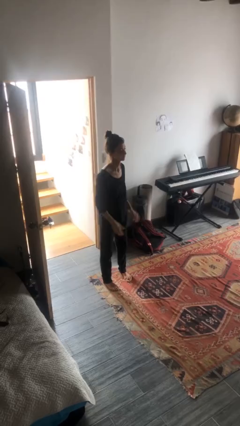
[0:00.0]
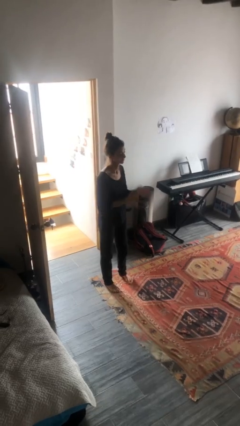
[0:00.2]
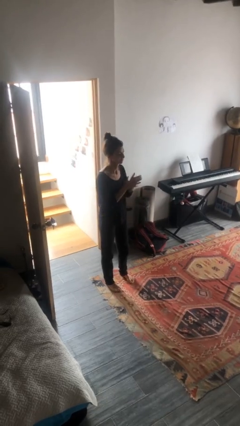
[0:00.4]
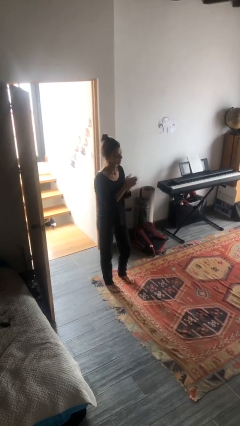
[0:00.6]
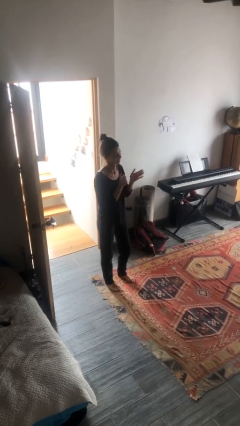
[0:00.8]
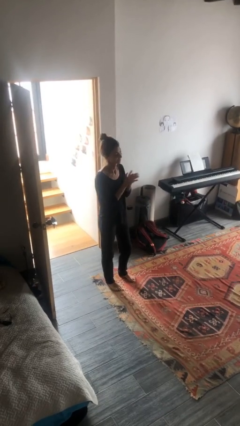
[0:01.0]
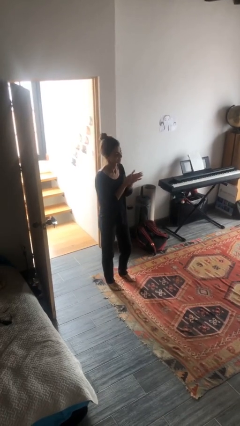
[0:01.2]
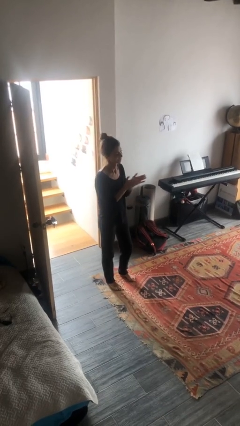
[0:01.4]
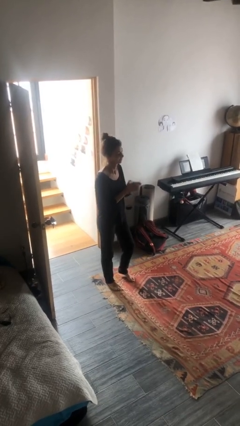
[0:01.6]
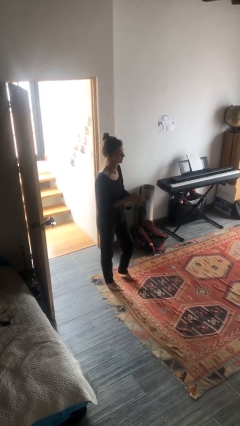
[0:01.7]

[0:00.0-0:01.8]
person claps hands

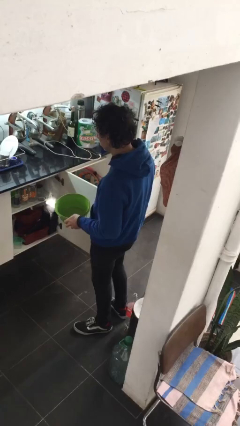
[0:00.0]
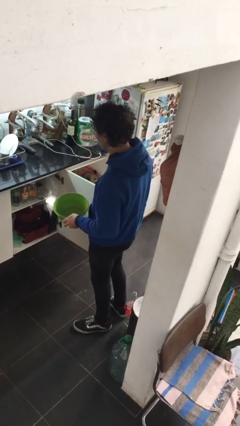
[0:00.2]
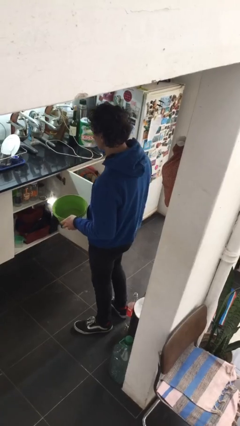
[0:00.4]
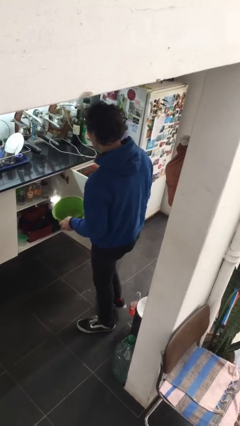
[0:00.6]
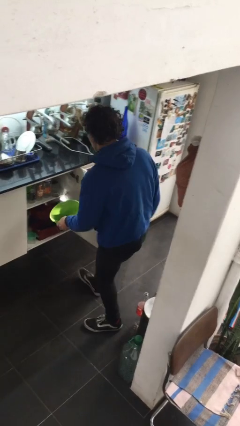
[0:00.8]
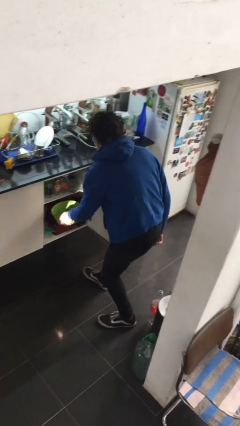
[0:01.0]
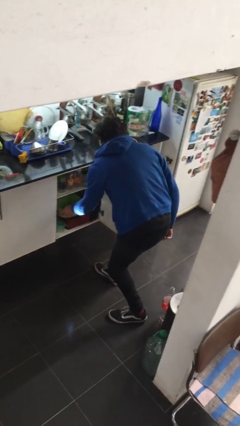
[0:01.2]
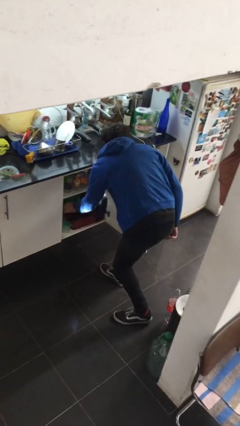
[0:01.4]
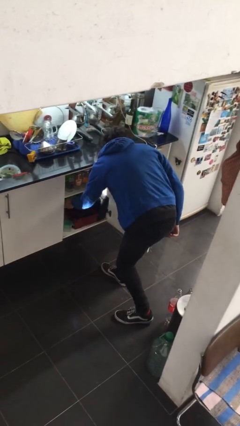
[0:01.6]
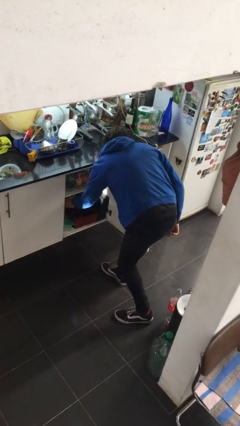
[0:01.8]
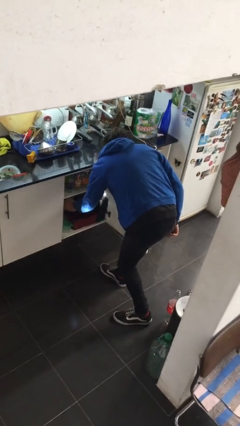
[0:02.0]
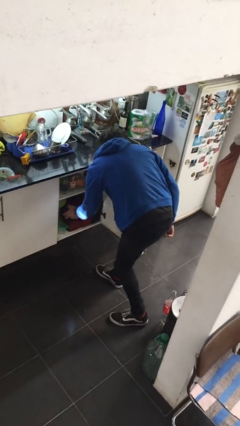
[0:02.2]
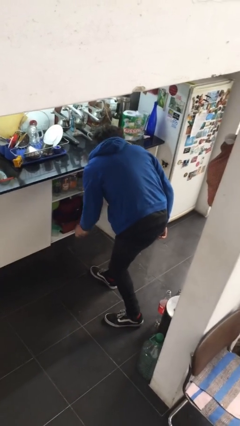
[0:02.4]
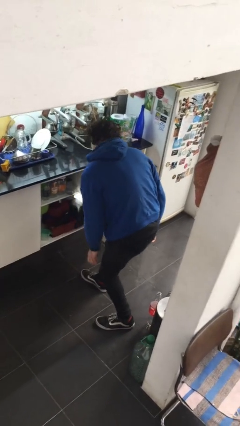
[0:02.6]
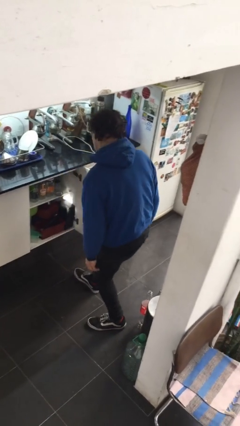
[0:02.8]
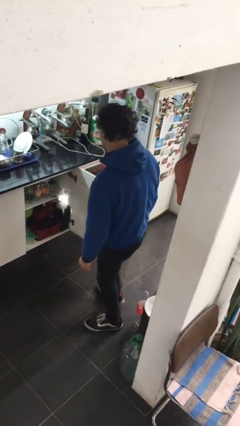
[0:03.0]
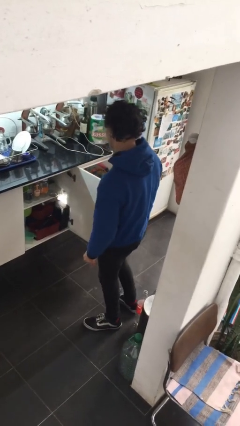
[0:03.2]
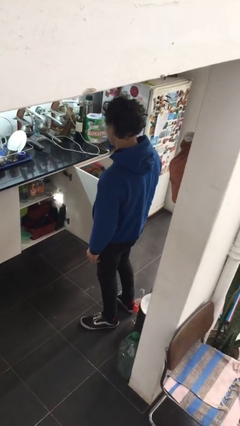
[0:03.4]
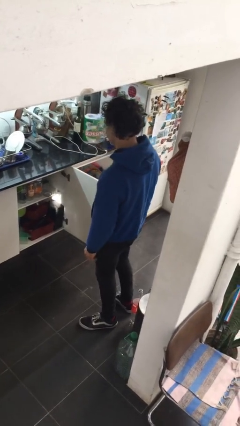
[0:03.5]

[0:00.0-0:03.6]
person puts down object into cabinet

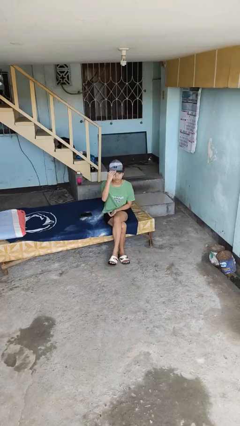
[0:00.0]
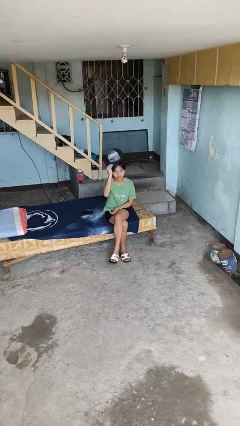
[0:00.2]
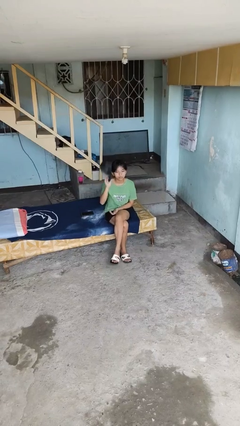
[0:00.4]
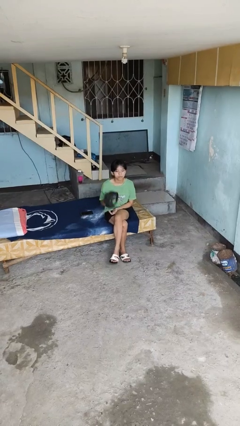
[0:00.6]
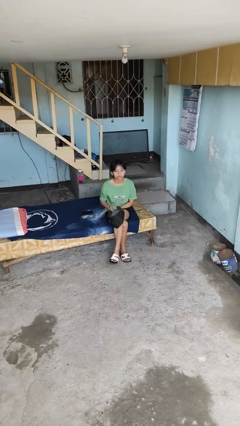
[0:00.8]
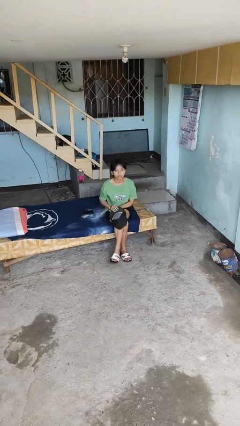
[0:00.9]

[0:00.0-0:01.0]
person takes off hat

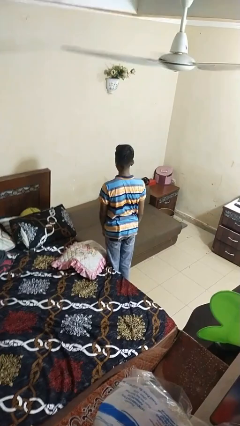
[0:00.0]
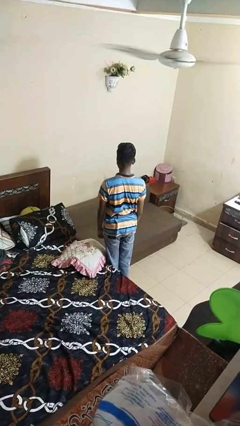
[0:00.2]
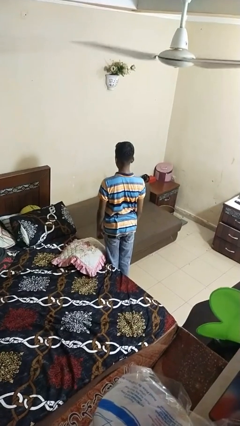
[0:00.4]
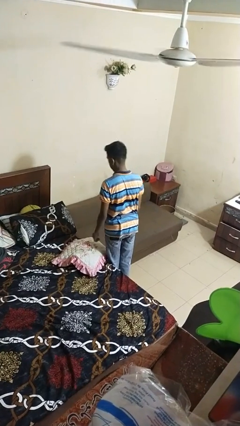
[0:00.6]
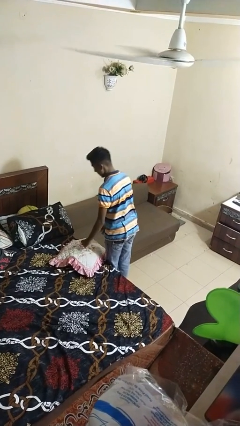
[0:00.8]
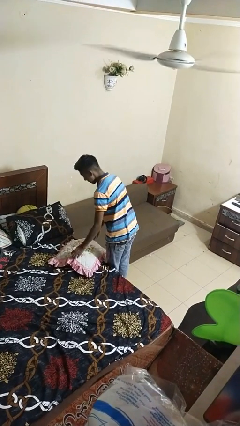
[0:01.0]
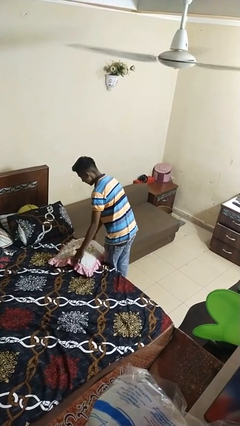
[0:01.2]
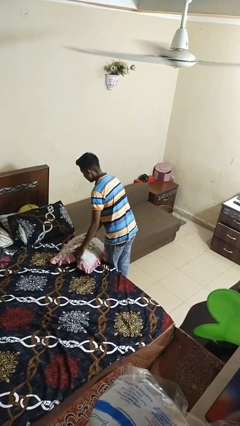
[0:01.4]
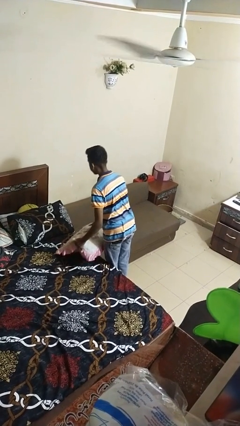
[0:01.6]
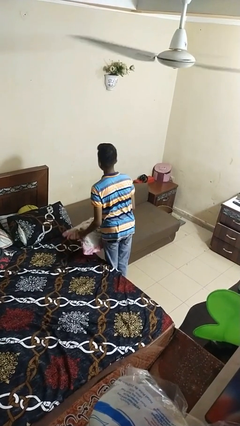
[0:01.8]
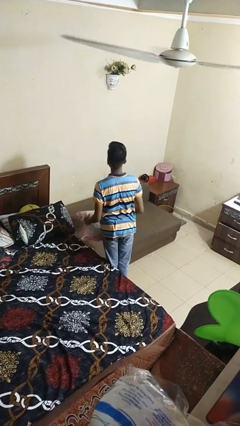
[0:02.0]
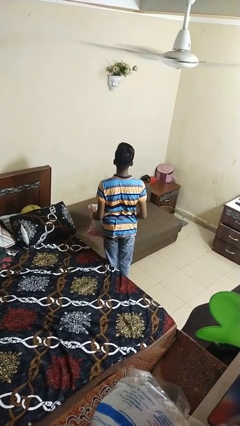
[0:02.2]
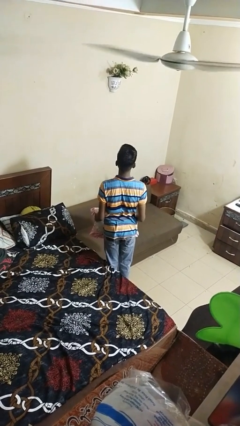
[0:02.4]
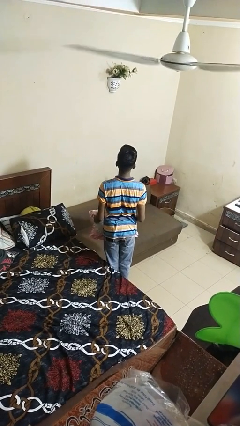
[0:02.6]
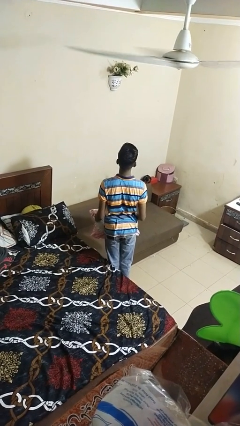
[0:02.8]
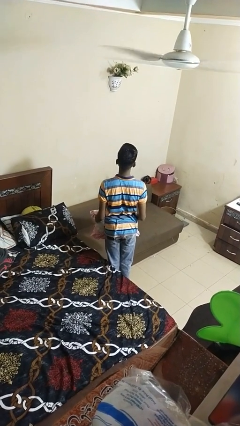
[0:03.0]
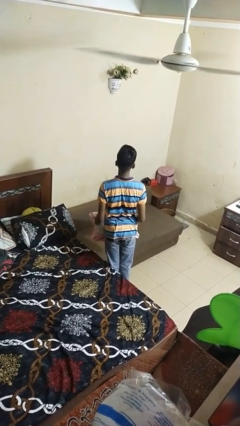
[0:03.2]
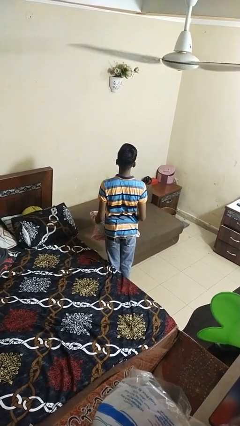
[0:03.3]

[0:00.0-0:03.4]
person picks up object from bed

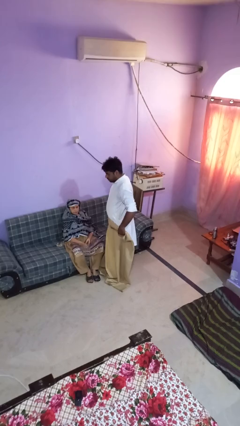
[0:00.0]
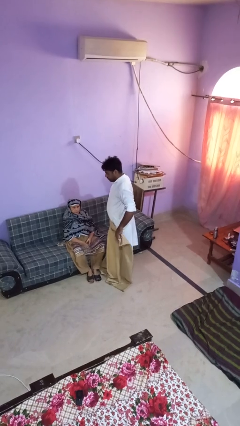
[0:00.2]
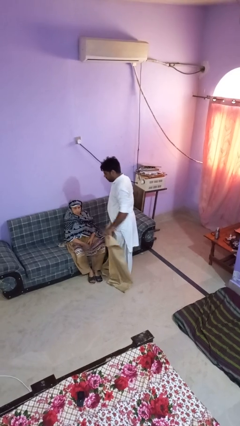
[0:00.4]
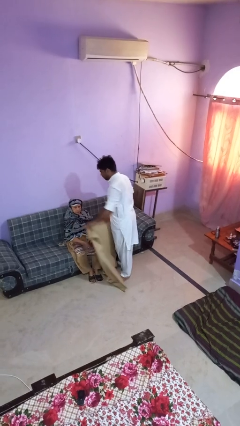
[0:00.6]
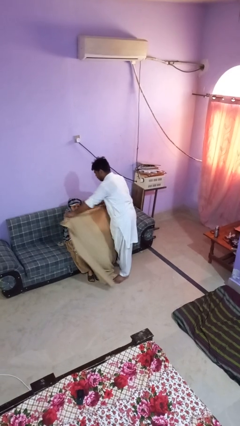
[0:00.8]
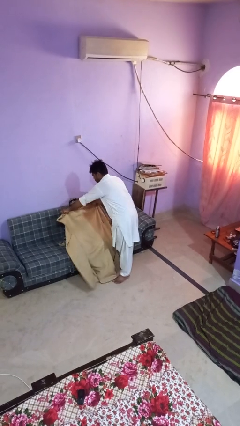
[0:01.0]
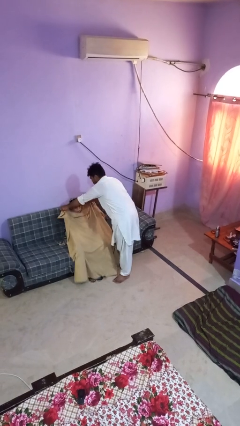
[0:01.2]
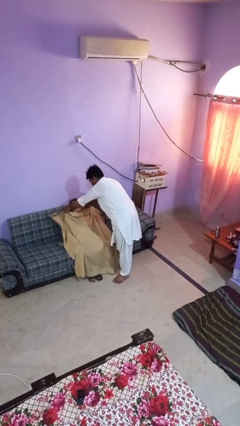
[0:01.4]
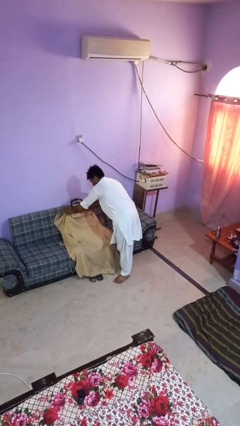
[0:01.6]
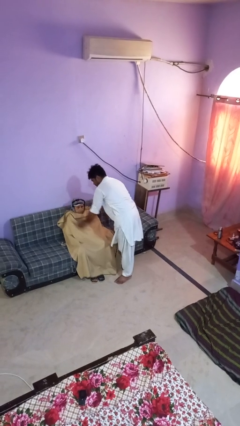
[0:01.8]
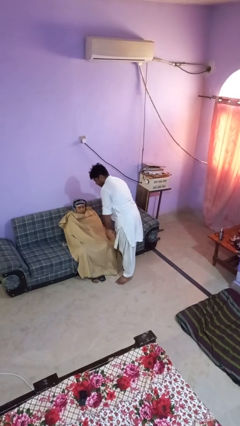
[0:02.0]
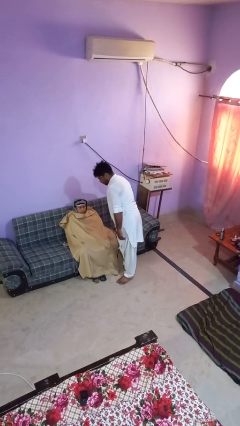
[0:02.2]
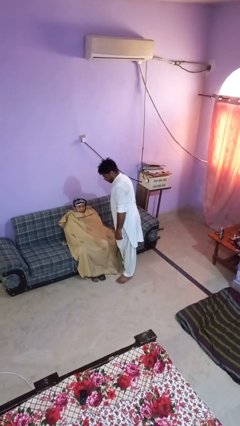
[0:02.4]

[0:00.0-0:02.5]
person covers friend with blanket

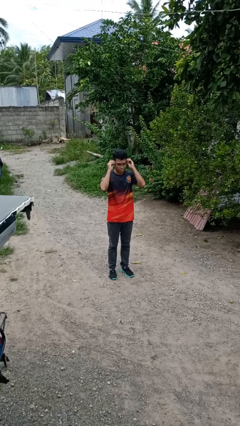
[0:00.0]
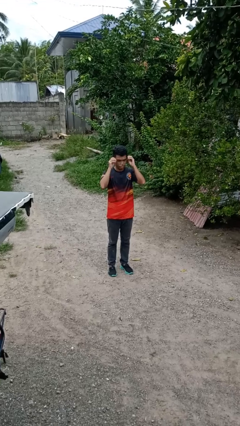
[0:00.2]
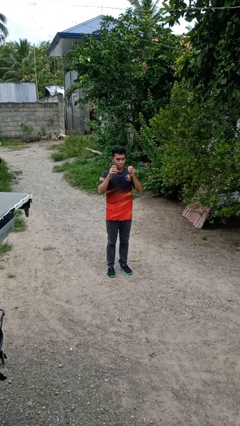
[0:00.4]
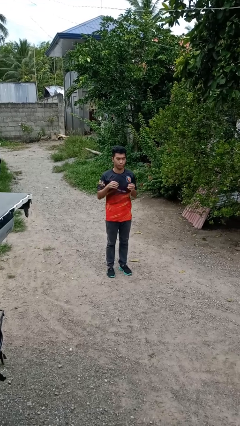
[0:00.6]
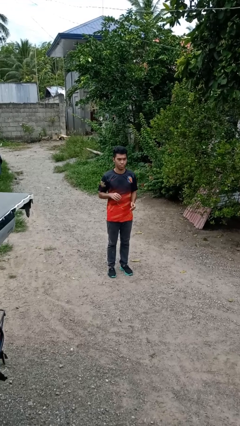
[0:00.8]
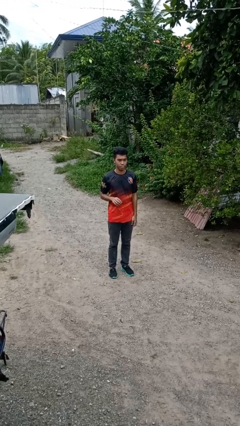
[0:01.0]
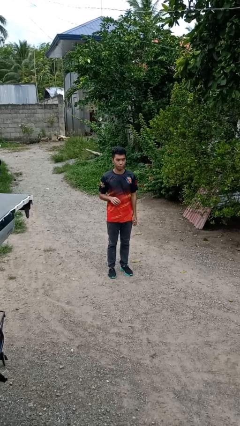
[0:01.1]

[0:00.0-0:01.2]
person takes off glasses

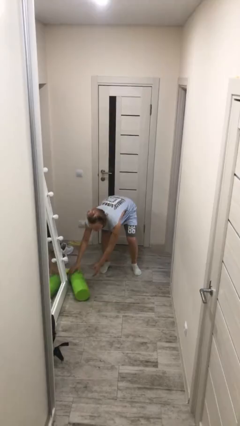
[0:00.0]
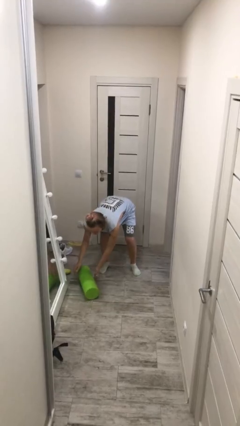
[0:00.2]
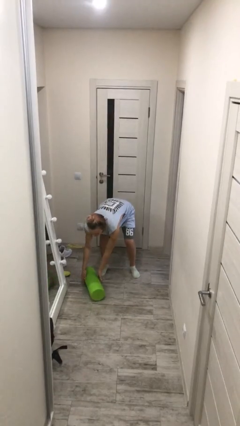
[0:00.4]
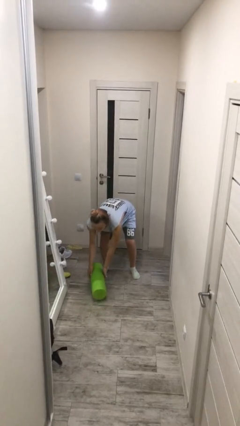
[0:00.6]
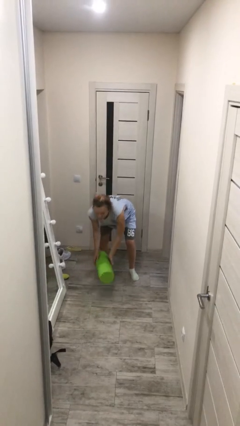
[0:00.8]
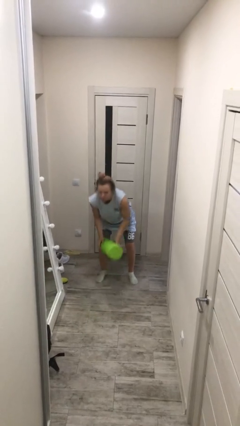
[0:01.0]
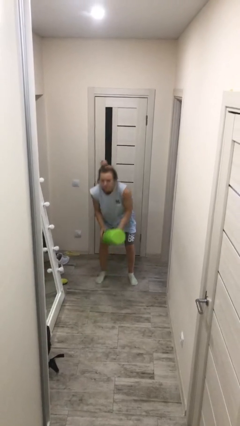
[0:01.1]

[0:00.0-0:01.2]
person picks up object from floor

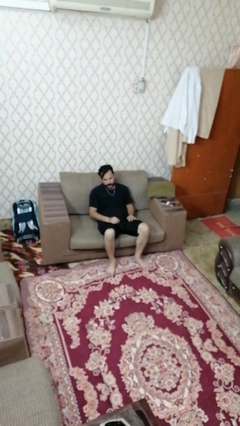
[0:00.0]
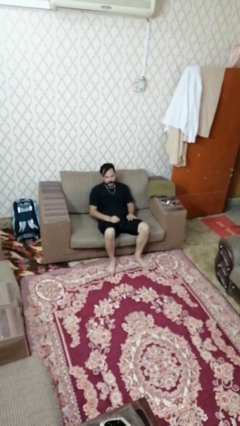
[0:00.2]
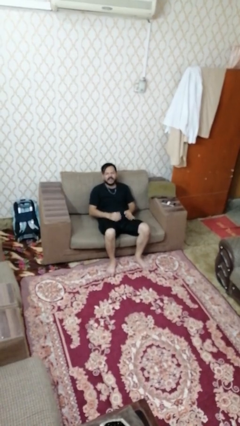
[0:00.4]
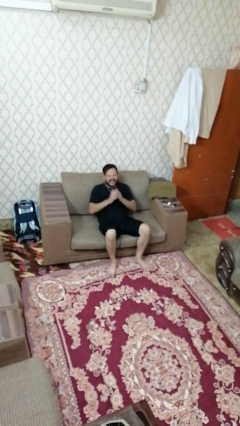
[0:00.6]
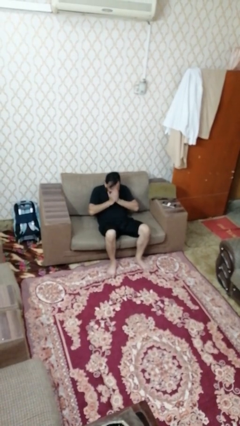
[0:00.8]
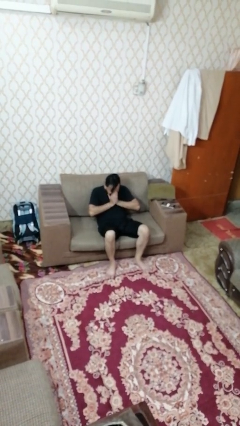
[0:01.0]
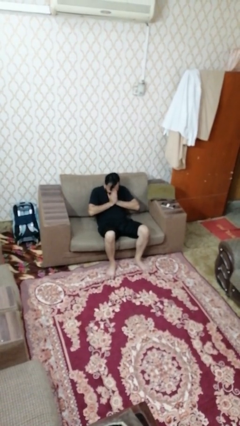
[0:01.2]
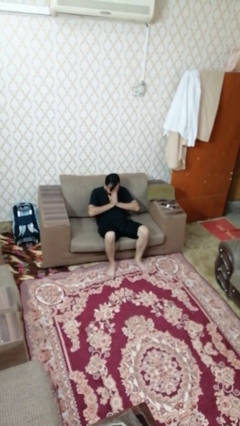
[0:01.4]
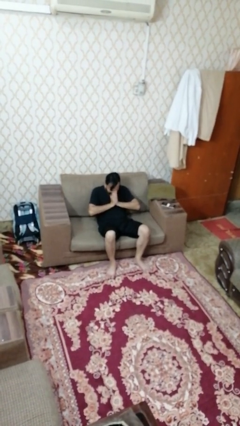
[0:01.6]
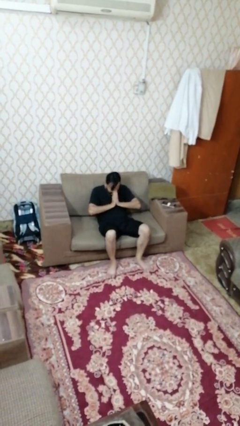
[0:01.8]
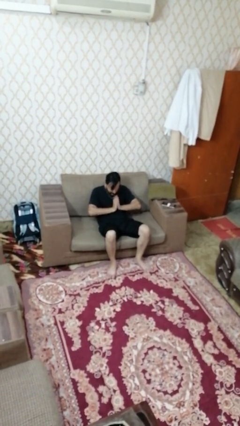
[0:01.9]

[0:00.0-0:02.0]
person sneezes into hand
